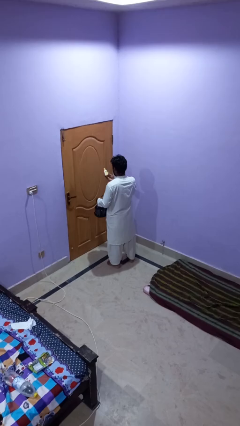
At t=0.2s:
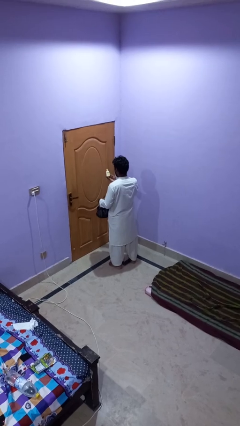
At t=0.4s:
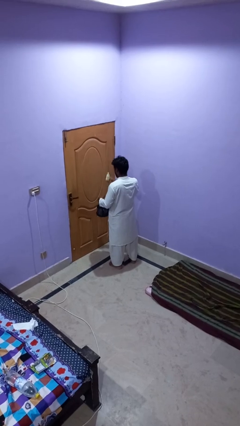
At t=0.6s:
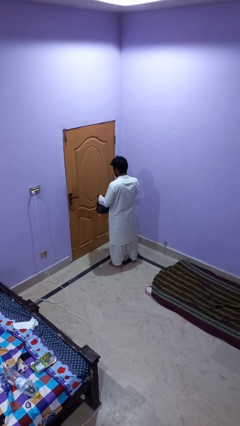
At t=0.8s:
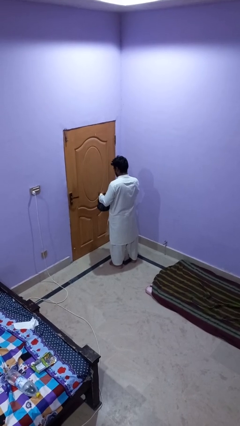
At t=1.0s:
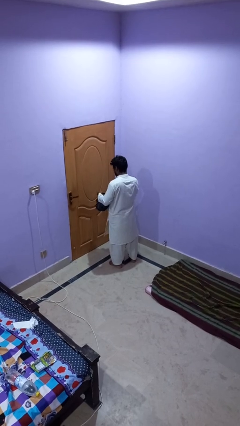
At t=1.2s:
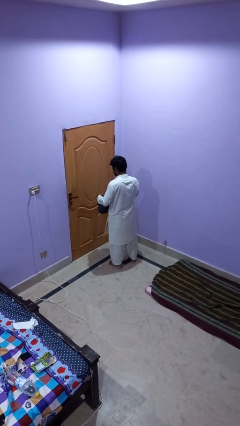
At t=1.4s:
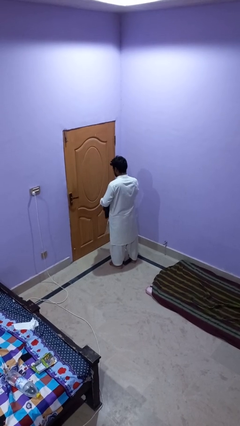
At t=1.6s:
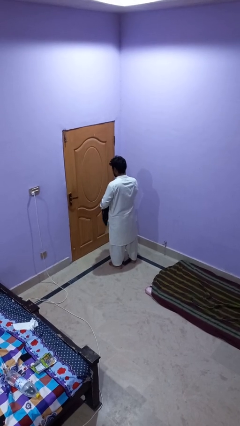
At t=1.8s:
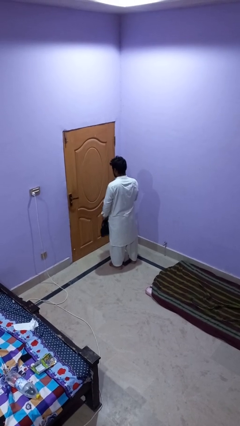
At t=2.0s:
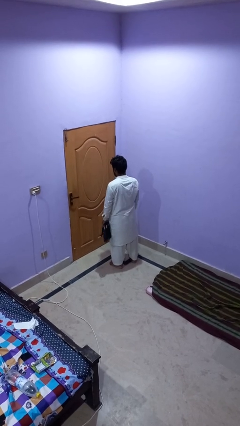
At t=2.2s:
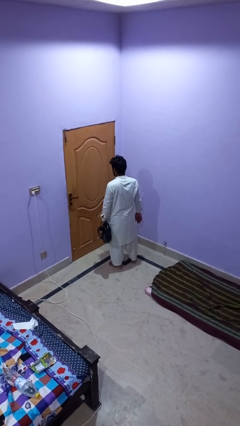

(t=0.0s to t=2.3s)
person puts object into purse

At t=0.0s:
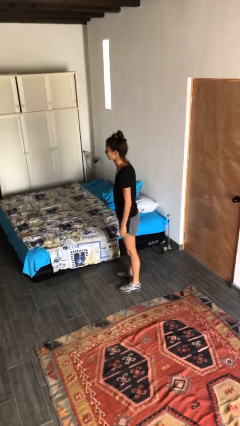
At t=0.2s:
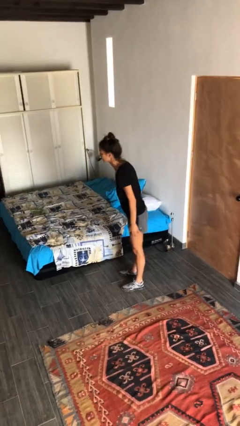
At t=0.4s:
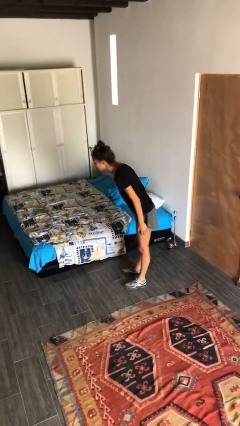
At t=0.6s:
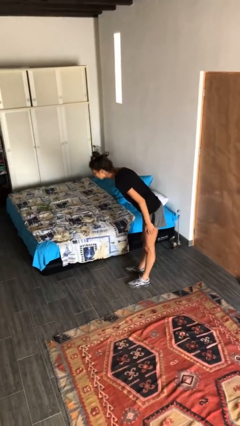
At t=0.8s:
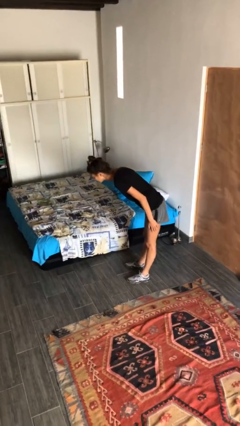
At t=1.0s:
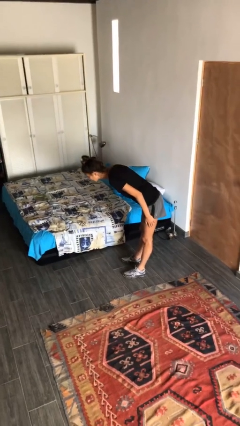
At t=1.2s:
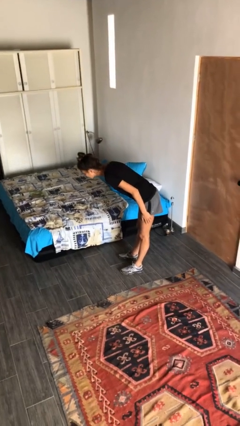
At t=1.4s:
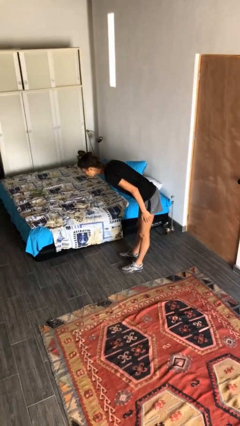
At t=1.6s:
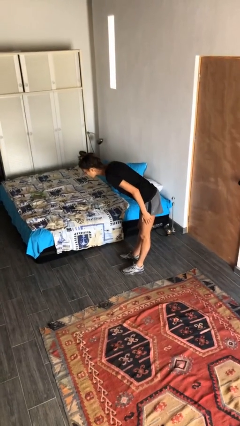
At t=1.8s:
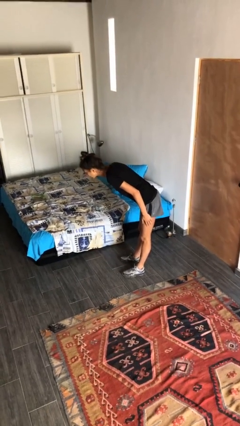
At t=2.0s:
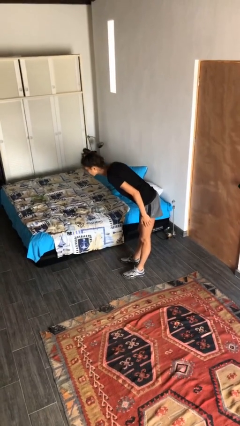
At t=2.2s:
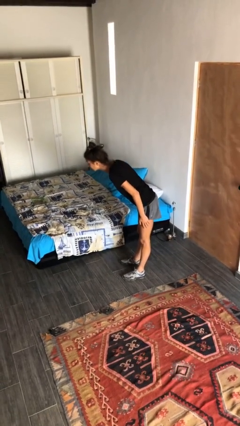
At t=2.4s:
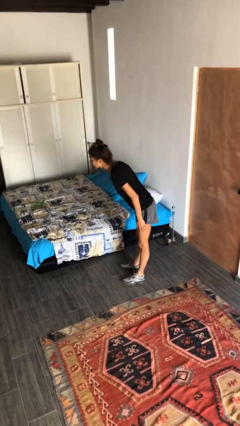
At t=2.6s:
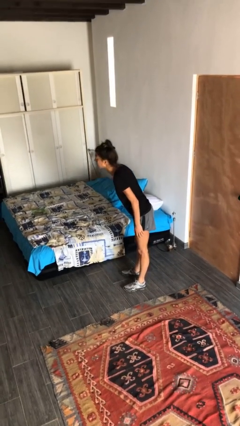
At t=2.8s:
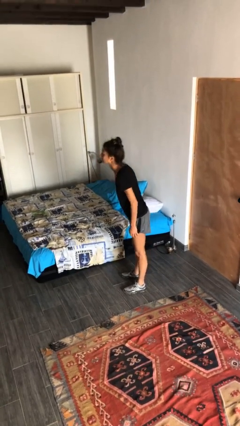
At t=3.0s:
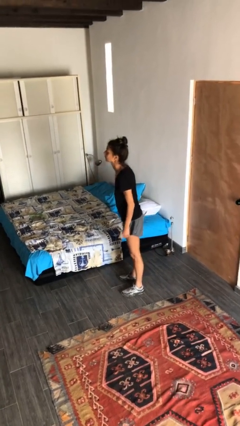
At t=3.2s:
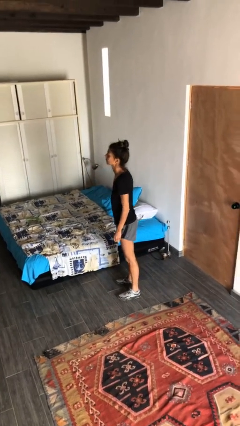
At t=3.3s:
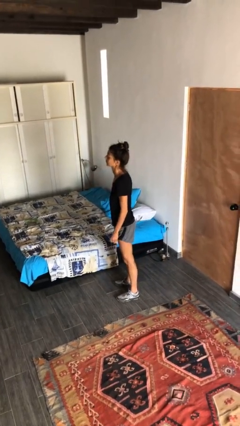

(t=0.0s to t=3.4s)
person bows

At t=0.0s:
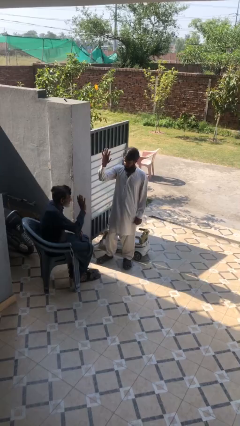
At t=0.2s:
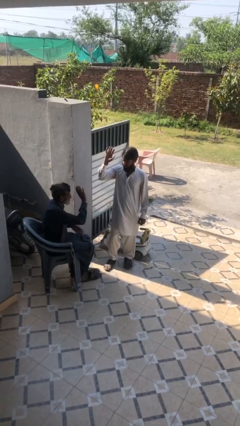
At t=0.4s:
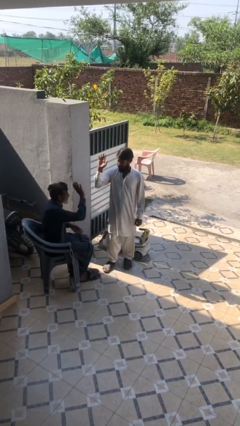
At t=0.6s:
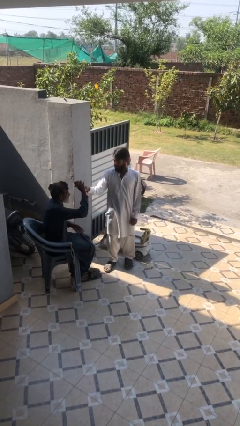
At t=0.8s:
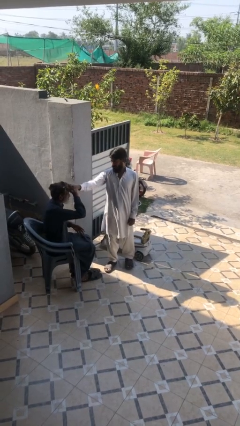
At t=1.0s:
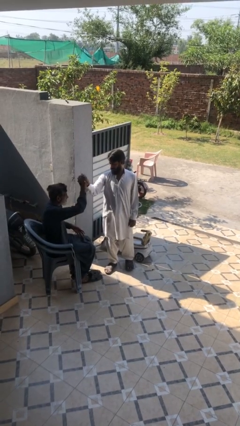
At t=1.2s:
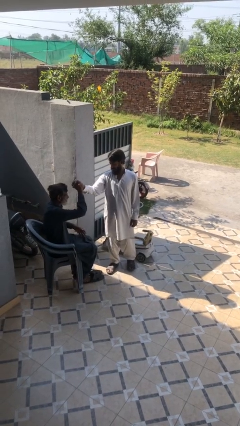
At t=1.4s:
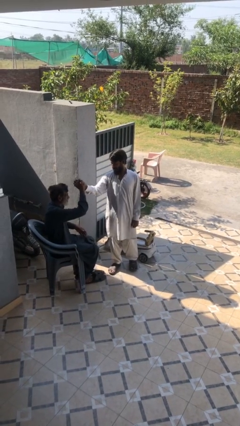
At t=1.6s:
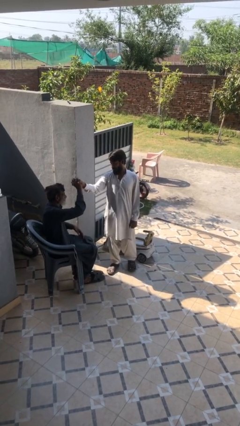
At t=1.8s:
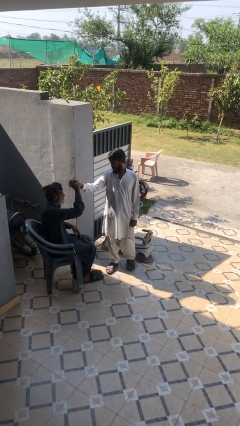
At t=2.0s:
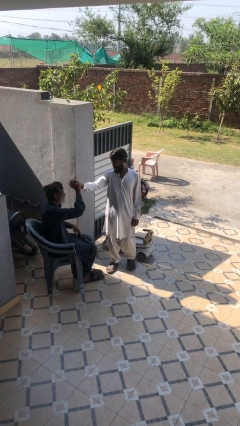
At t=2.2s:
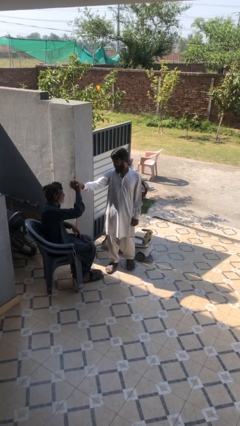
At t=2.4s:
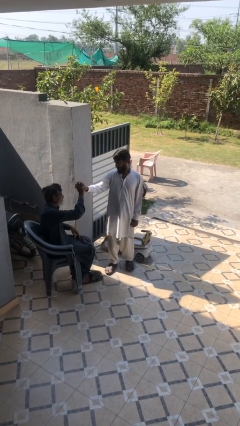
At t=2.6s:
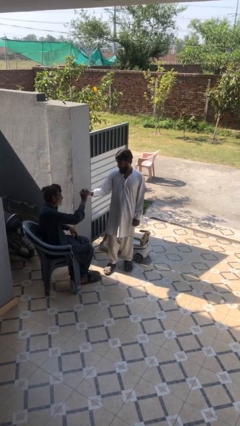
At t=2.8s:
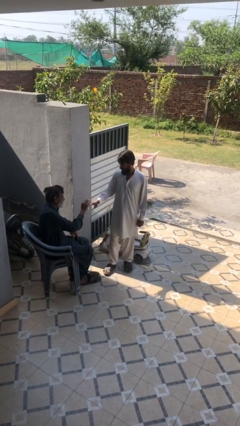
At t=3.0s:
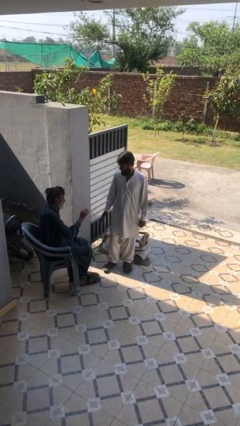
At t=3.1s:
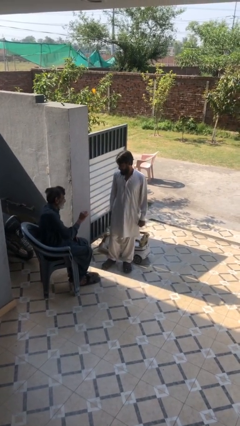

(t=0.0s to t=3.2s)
person highfives hand

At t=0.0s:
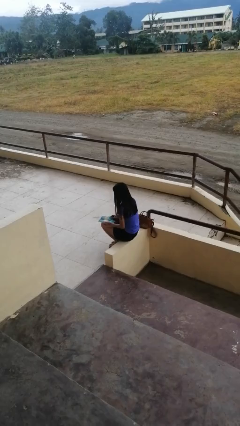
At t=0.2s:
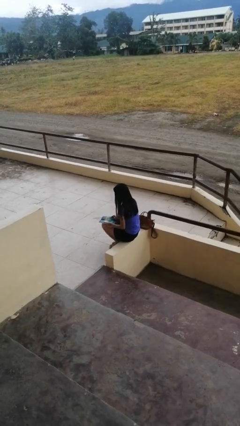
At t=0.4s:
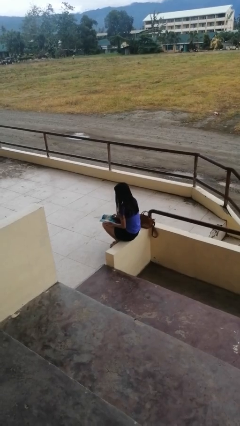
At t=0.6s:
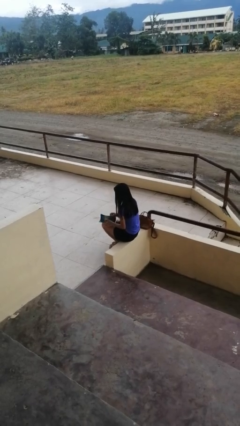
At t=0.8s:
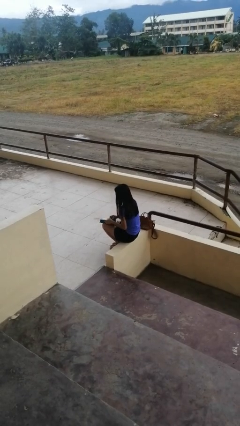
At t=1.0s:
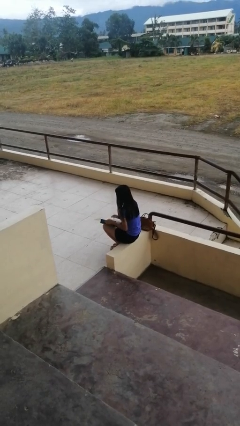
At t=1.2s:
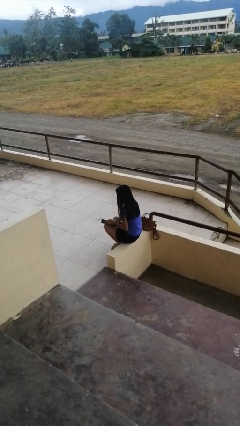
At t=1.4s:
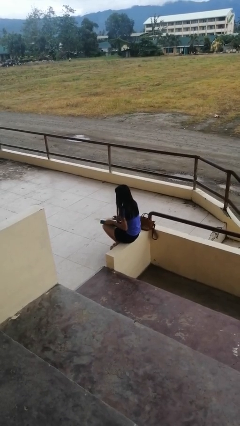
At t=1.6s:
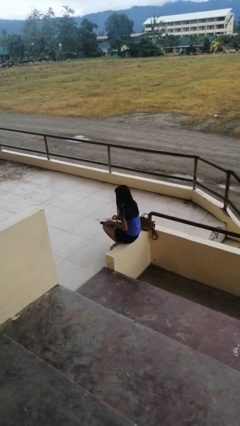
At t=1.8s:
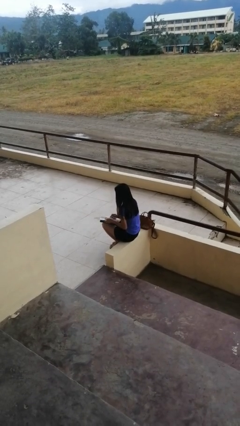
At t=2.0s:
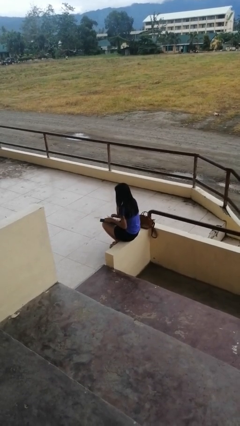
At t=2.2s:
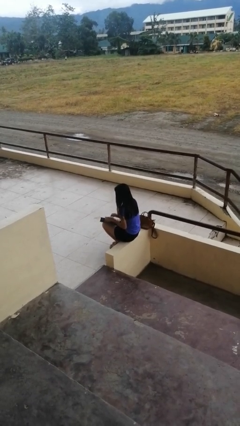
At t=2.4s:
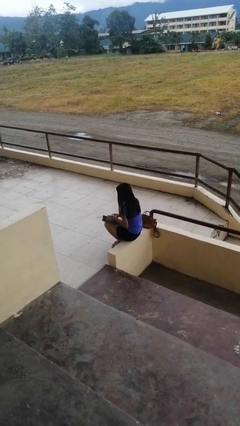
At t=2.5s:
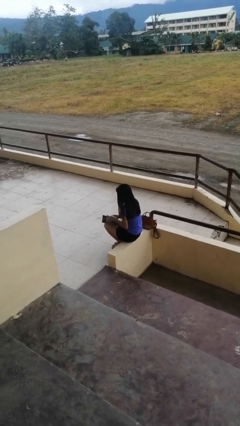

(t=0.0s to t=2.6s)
person reads magazine

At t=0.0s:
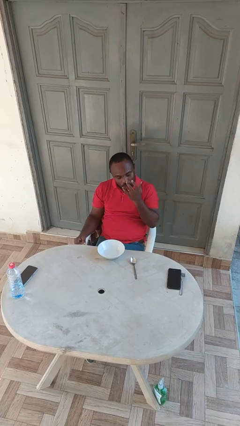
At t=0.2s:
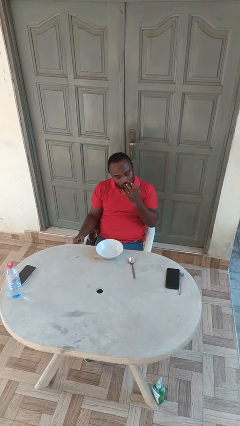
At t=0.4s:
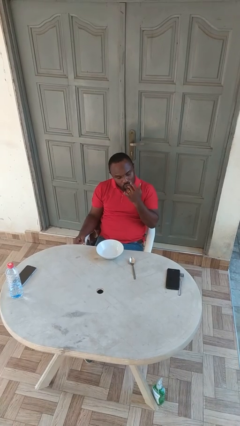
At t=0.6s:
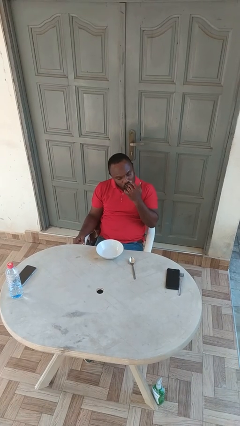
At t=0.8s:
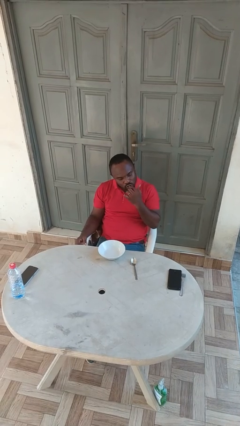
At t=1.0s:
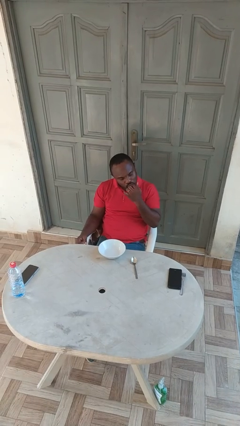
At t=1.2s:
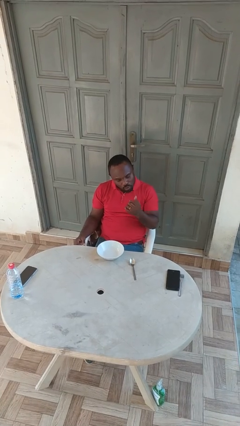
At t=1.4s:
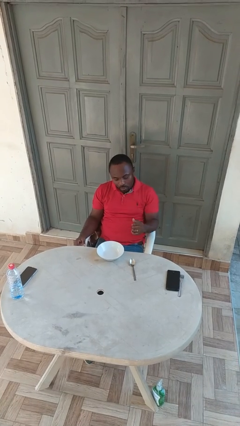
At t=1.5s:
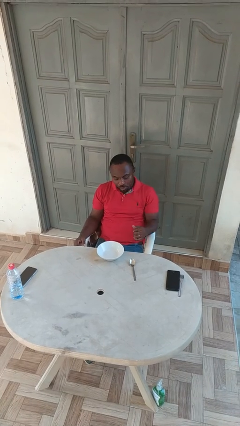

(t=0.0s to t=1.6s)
person licks fingers

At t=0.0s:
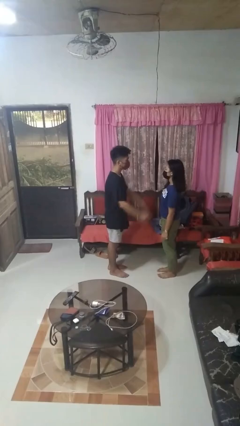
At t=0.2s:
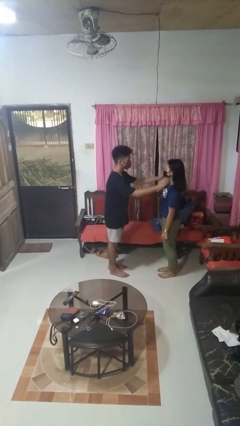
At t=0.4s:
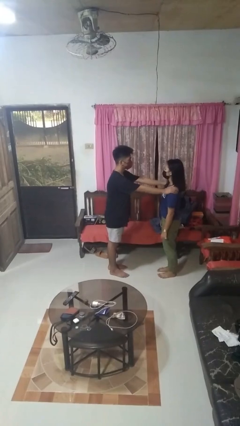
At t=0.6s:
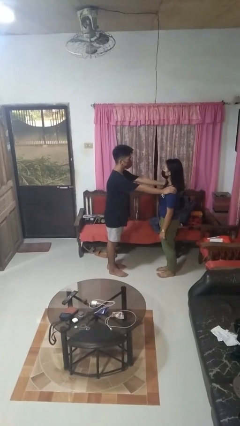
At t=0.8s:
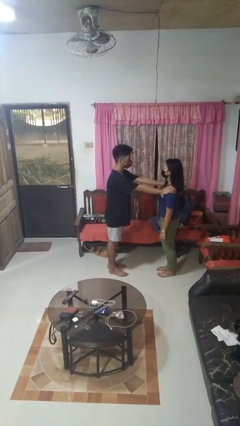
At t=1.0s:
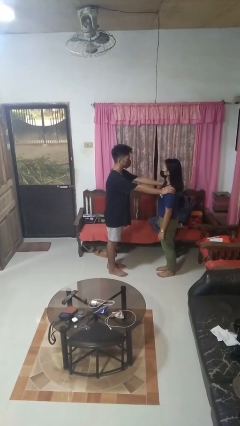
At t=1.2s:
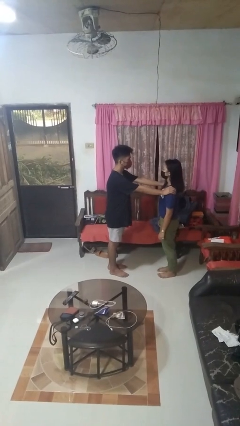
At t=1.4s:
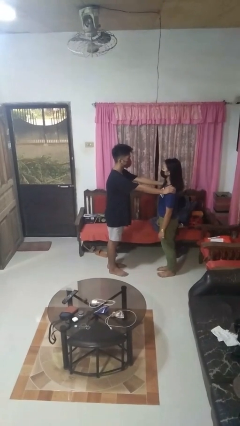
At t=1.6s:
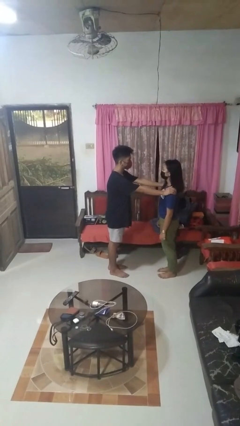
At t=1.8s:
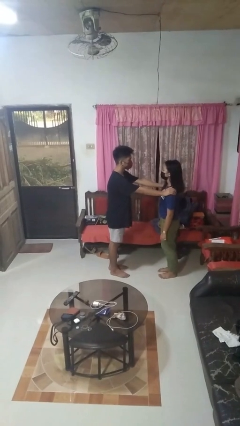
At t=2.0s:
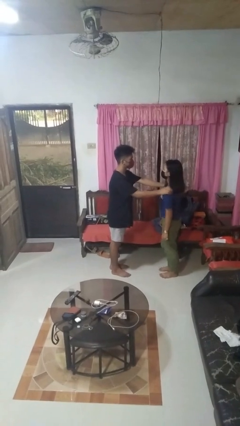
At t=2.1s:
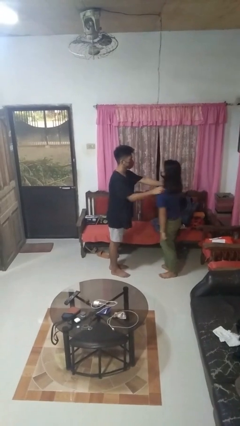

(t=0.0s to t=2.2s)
person grabs person by shoulder

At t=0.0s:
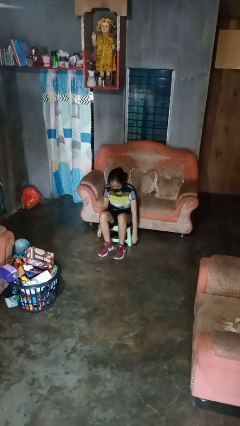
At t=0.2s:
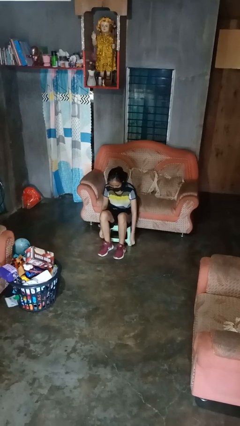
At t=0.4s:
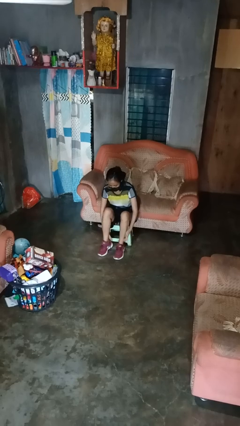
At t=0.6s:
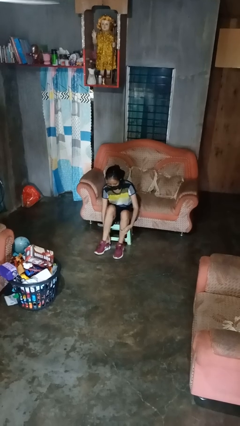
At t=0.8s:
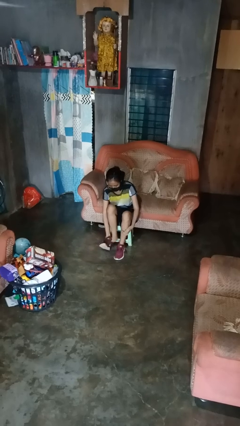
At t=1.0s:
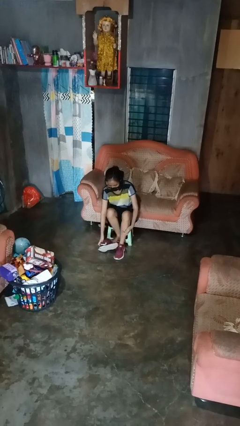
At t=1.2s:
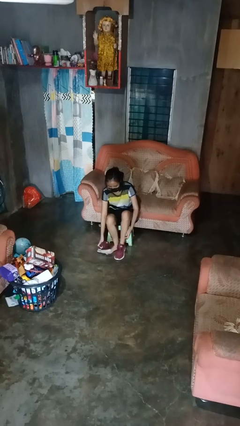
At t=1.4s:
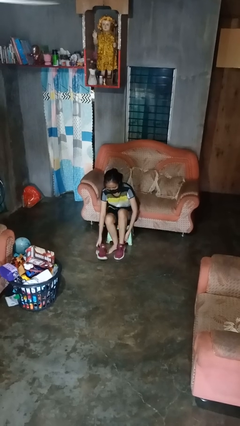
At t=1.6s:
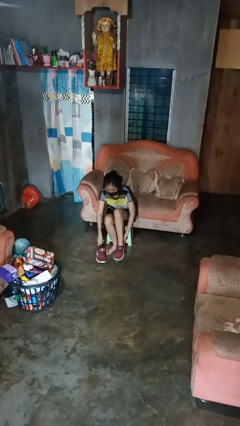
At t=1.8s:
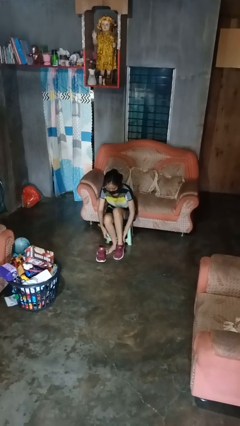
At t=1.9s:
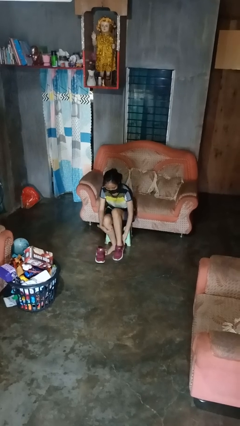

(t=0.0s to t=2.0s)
person takes off shoes
